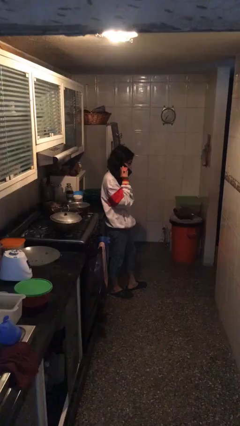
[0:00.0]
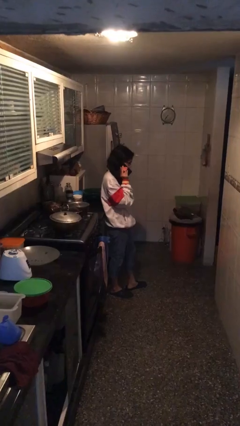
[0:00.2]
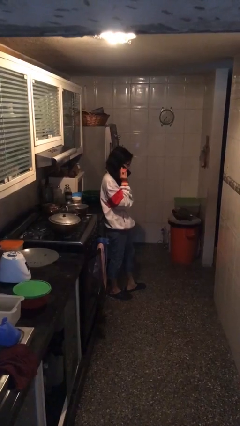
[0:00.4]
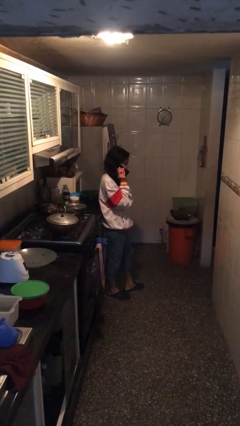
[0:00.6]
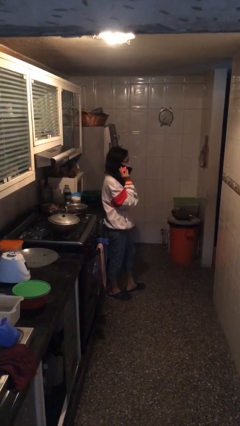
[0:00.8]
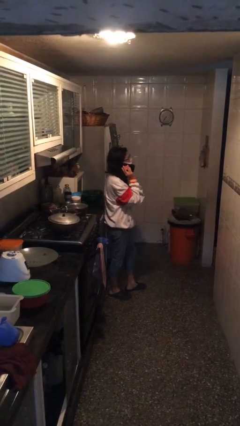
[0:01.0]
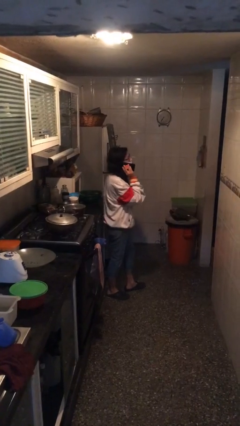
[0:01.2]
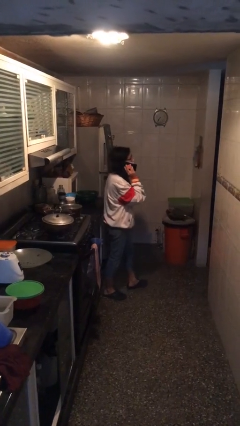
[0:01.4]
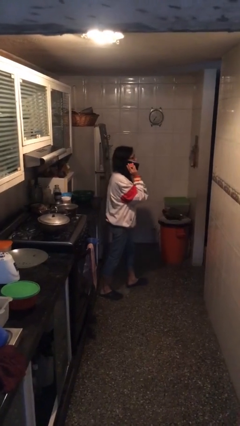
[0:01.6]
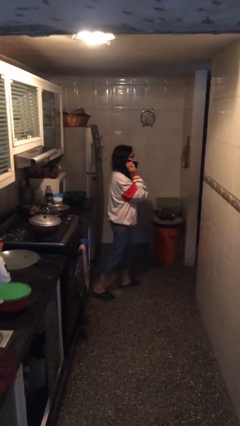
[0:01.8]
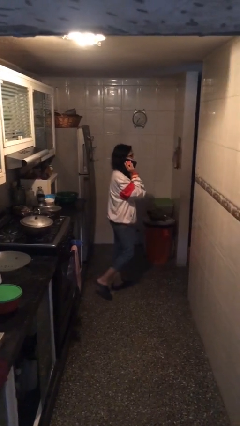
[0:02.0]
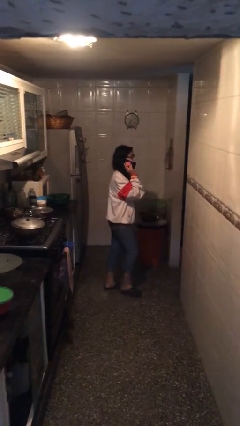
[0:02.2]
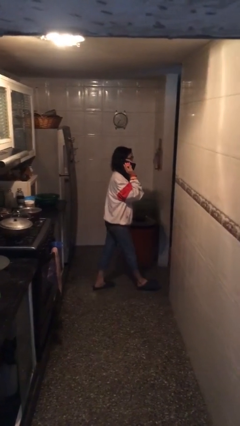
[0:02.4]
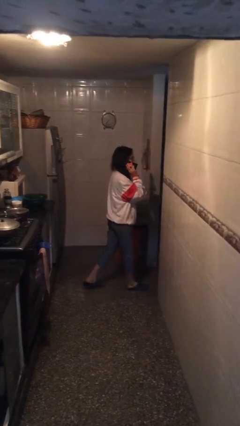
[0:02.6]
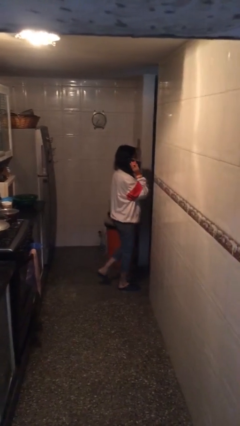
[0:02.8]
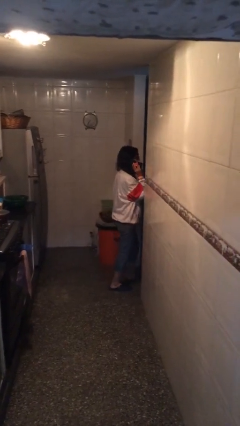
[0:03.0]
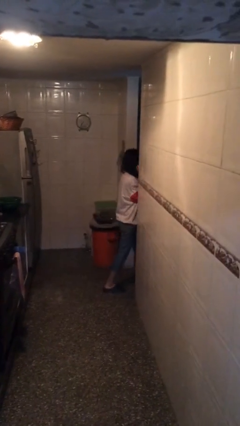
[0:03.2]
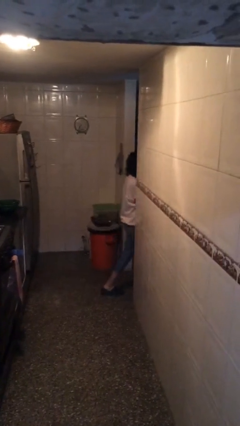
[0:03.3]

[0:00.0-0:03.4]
person exits scene through structure

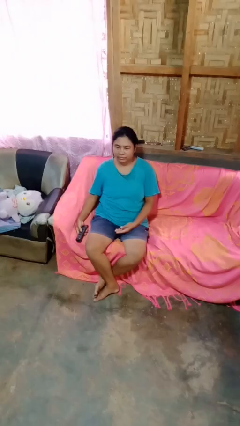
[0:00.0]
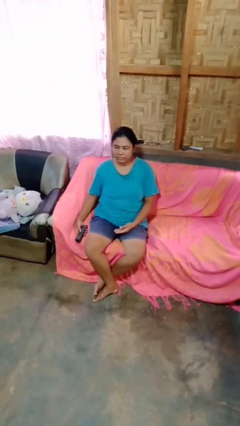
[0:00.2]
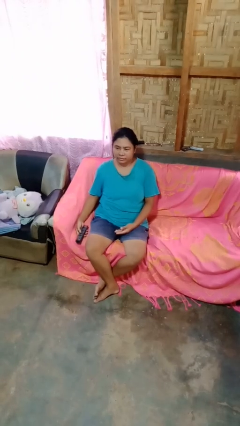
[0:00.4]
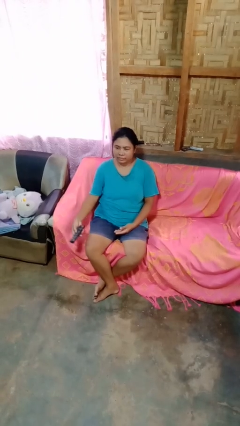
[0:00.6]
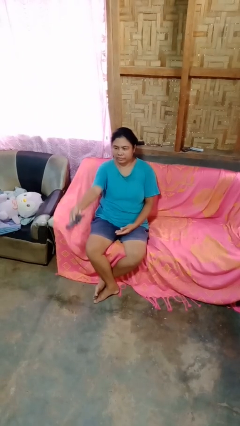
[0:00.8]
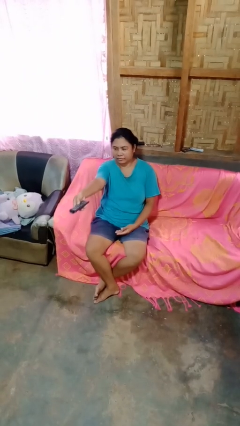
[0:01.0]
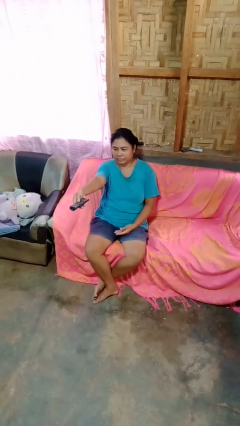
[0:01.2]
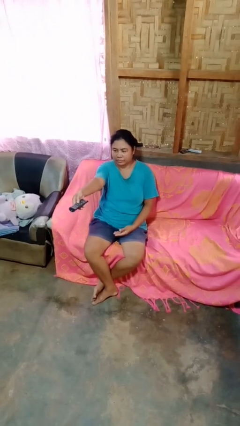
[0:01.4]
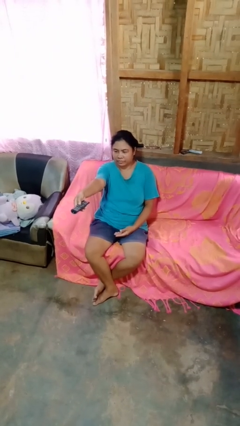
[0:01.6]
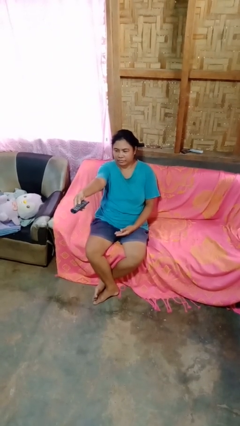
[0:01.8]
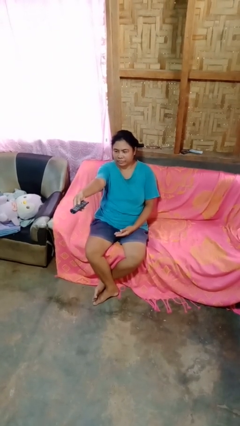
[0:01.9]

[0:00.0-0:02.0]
person uses television remote

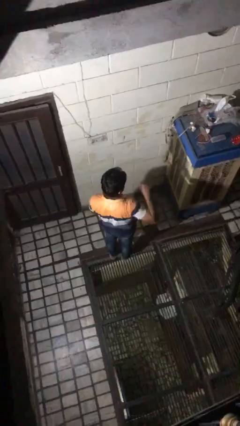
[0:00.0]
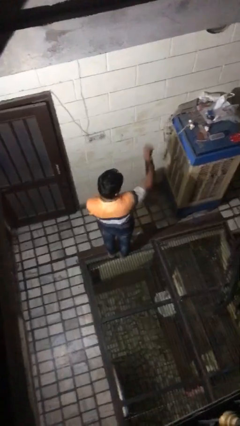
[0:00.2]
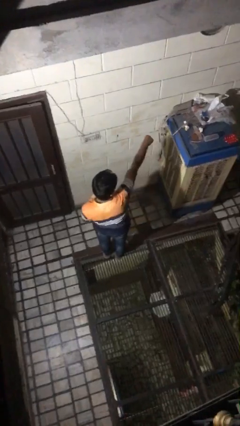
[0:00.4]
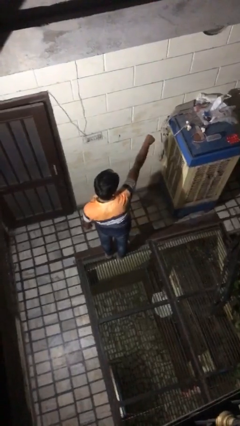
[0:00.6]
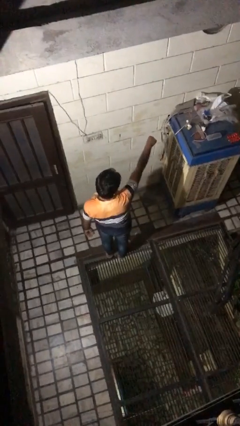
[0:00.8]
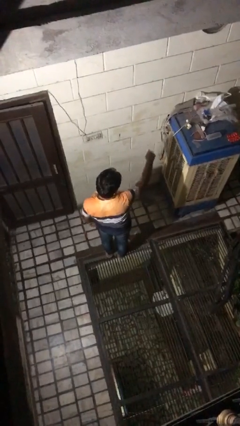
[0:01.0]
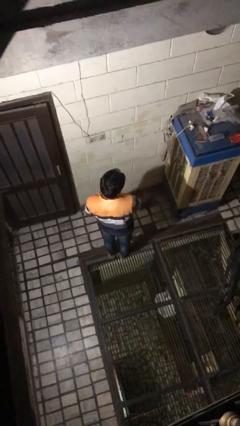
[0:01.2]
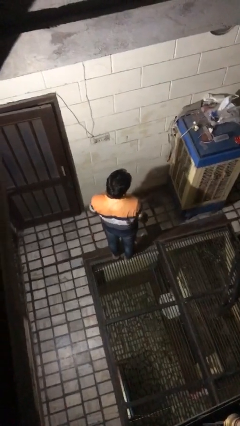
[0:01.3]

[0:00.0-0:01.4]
person punches

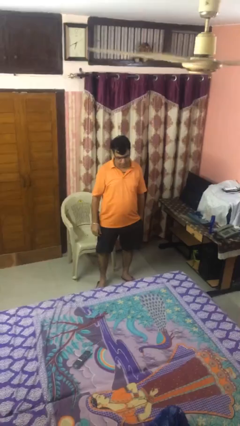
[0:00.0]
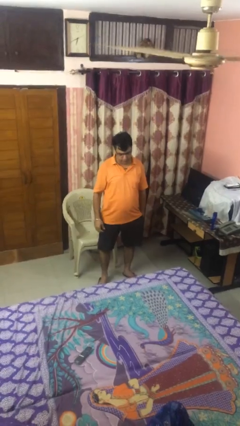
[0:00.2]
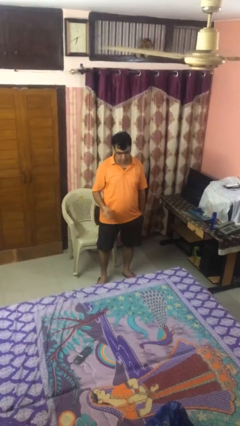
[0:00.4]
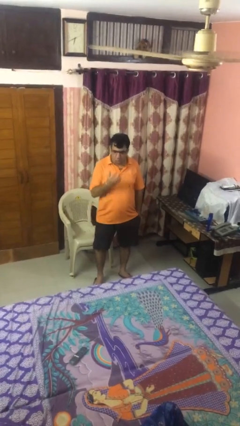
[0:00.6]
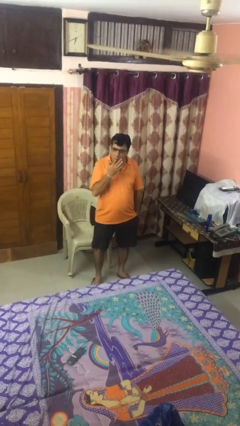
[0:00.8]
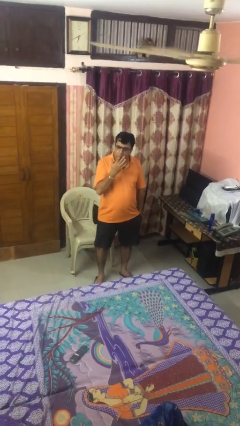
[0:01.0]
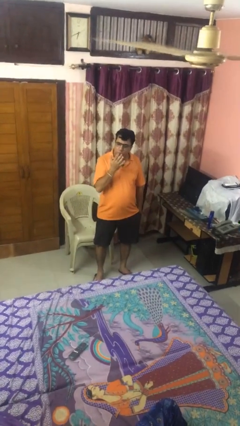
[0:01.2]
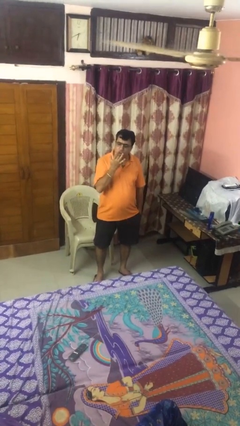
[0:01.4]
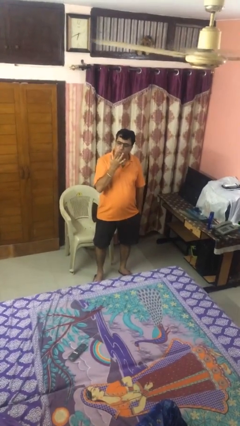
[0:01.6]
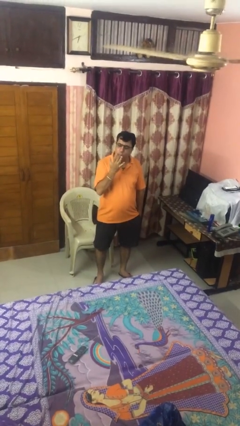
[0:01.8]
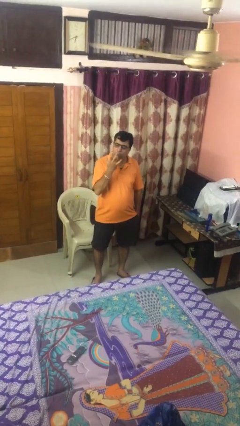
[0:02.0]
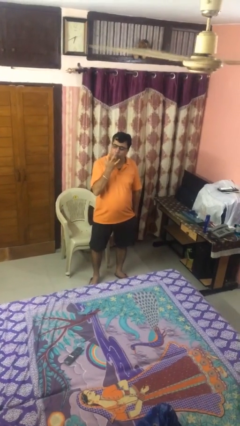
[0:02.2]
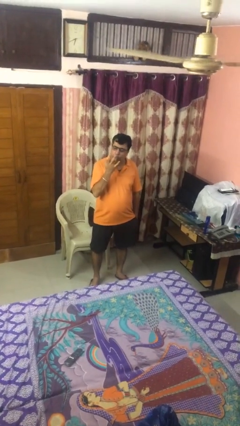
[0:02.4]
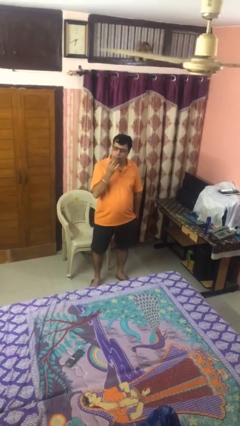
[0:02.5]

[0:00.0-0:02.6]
person licks fingers

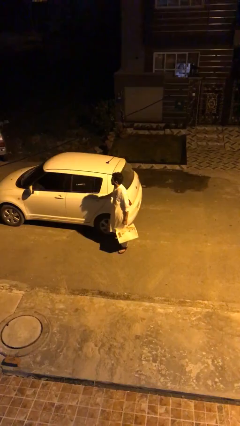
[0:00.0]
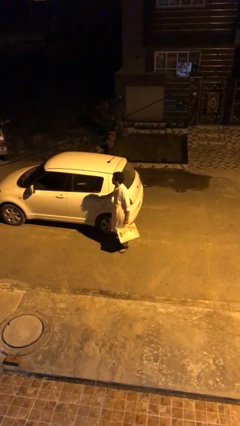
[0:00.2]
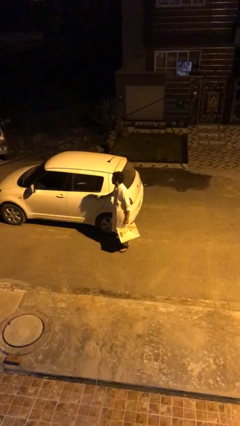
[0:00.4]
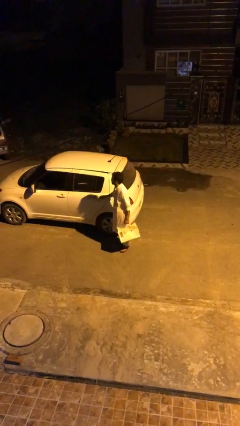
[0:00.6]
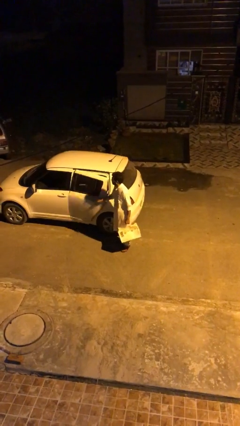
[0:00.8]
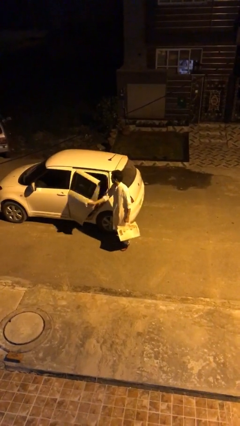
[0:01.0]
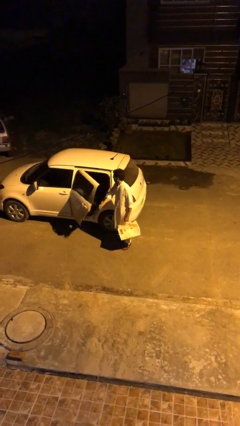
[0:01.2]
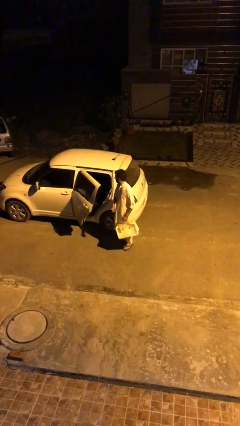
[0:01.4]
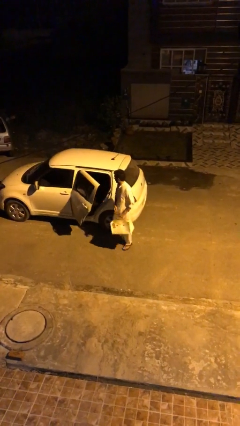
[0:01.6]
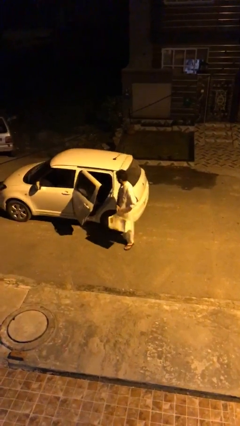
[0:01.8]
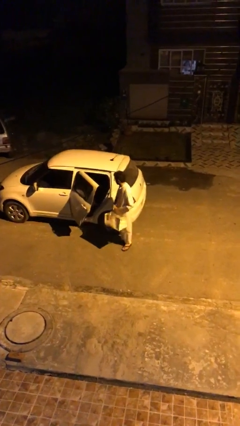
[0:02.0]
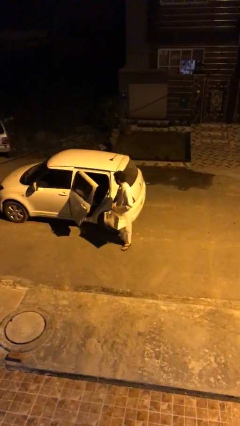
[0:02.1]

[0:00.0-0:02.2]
person opens car door

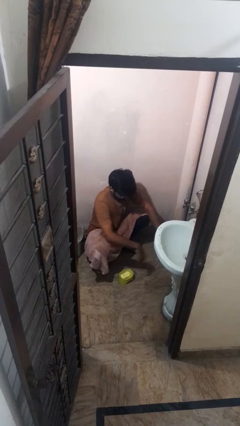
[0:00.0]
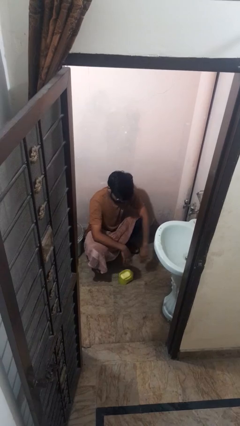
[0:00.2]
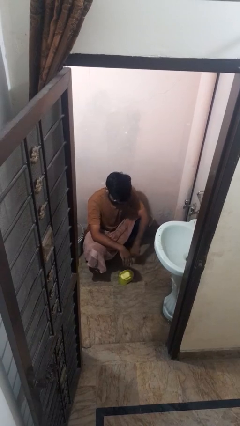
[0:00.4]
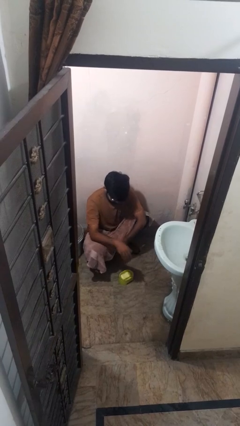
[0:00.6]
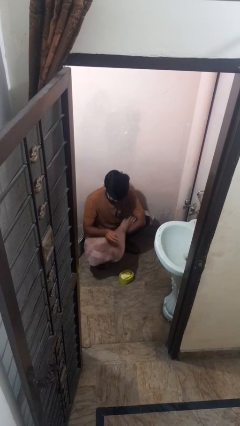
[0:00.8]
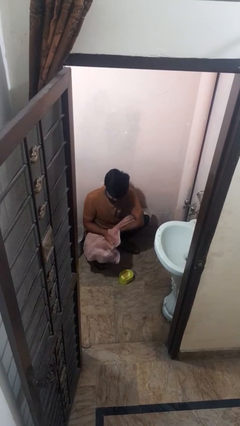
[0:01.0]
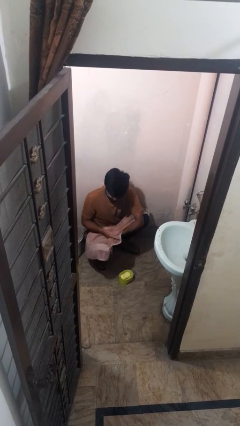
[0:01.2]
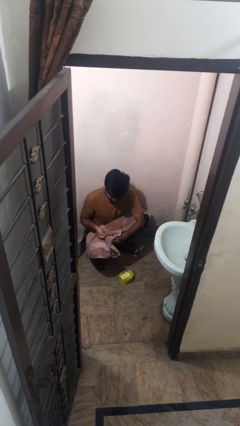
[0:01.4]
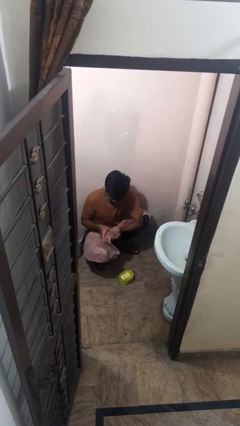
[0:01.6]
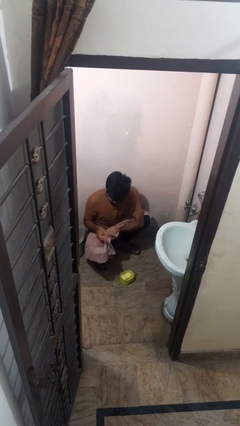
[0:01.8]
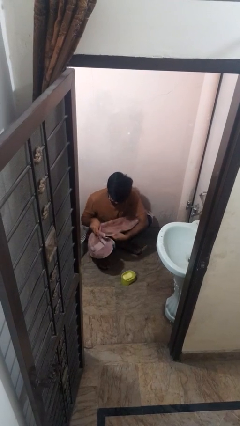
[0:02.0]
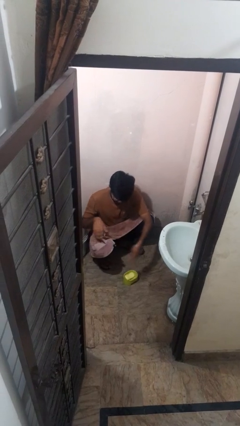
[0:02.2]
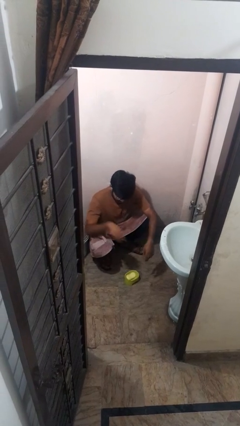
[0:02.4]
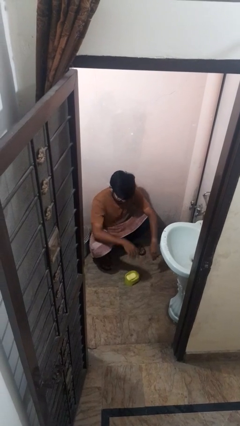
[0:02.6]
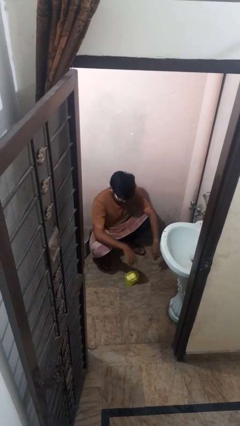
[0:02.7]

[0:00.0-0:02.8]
person dries hands with towel

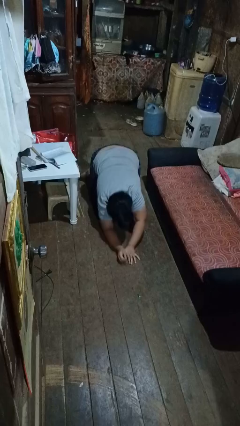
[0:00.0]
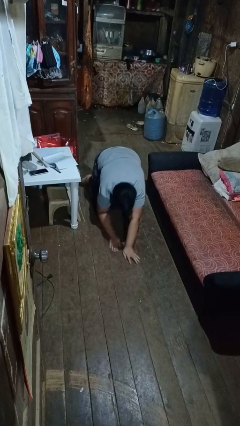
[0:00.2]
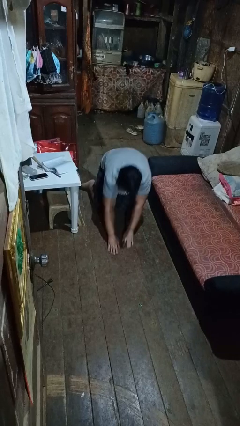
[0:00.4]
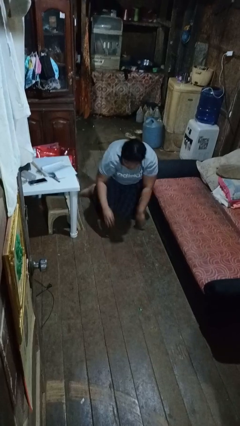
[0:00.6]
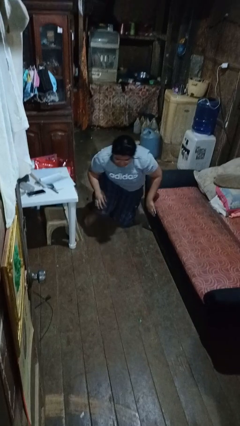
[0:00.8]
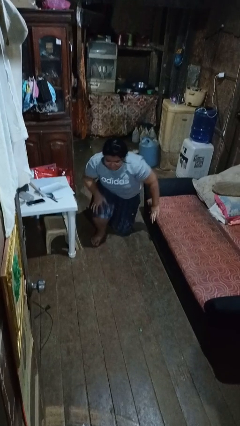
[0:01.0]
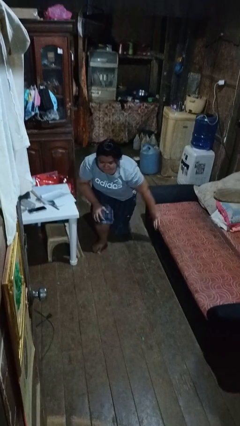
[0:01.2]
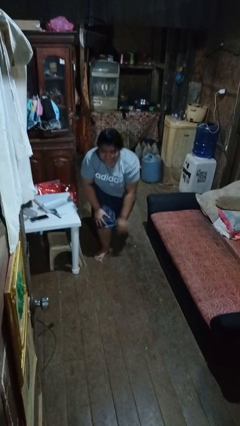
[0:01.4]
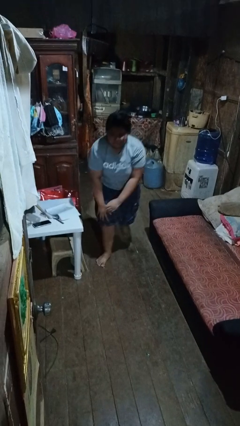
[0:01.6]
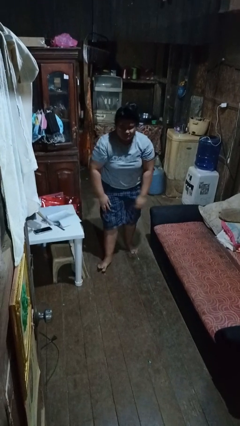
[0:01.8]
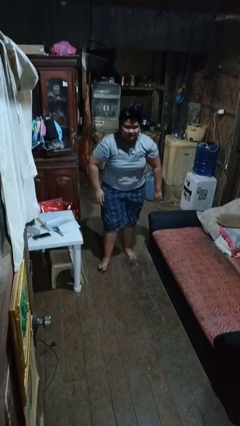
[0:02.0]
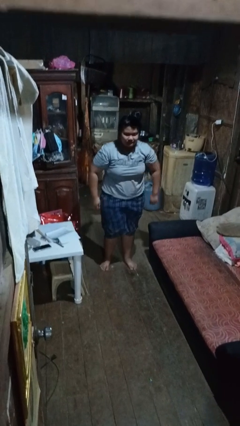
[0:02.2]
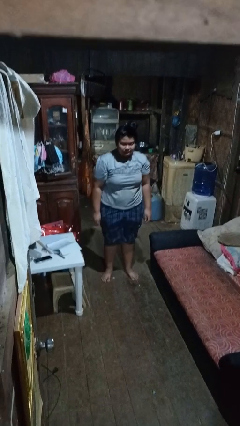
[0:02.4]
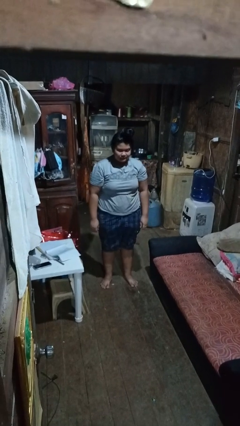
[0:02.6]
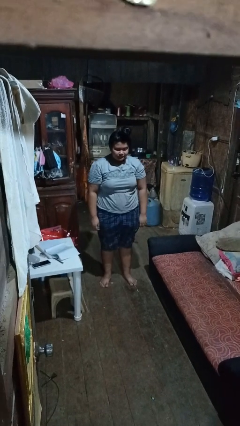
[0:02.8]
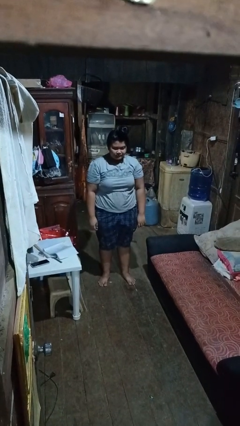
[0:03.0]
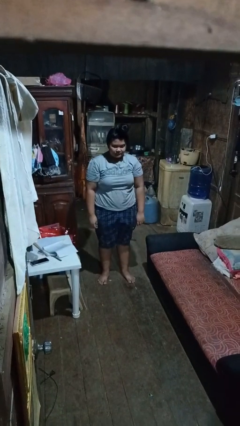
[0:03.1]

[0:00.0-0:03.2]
person stands up from floor
